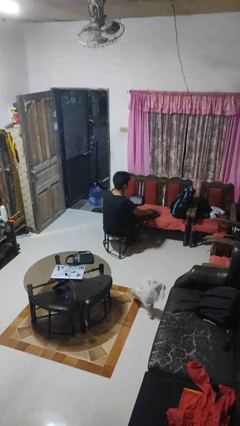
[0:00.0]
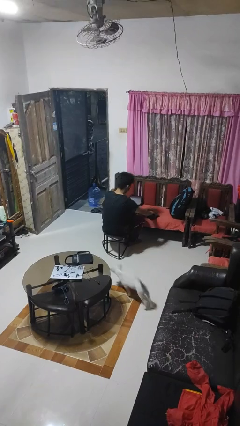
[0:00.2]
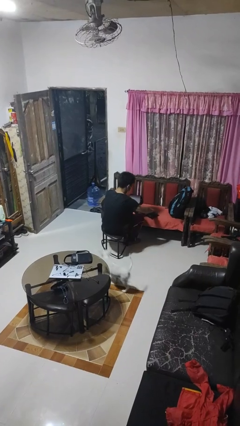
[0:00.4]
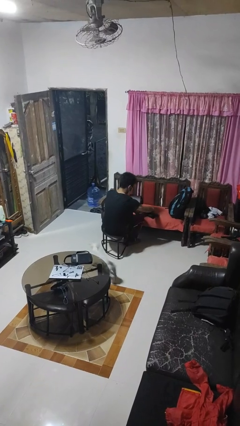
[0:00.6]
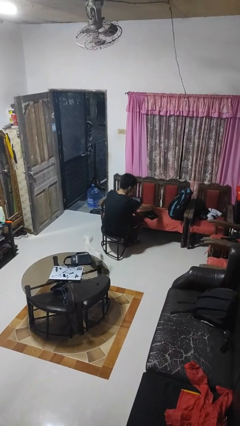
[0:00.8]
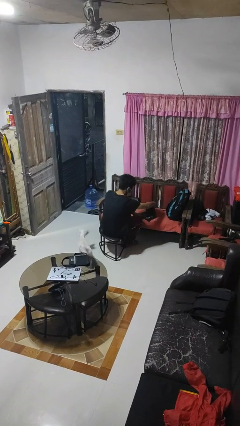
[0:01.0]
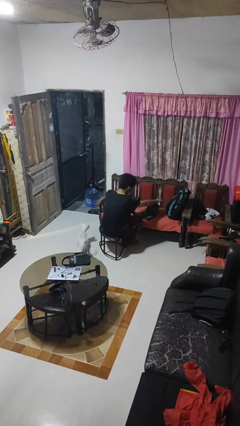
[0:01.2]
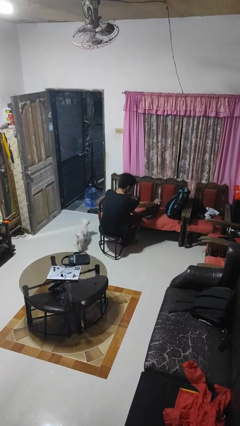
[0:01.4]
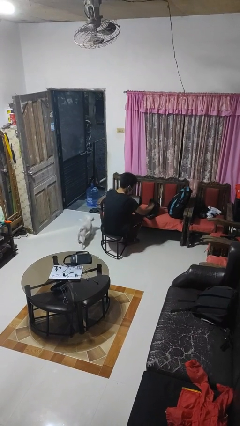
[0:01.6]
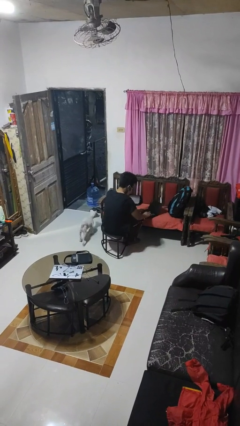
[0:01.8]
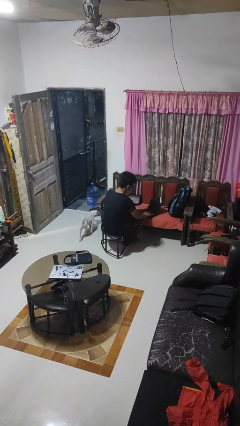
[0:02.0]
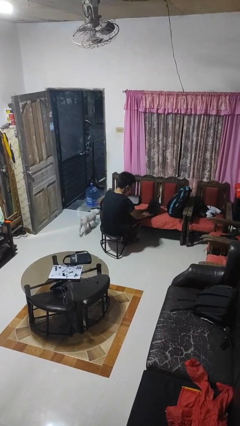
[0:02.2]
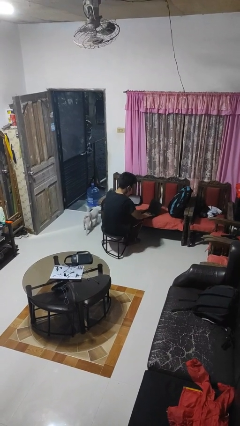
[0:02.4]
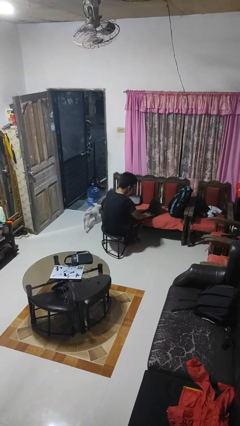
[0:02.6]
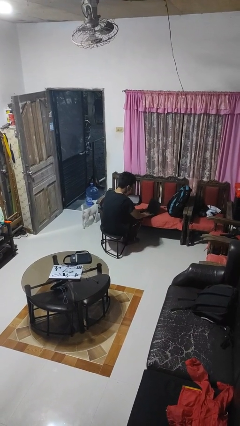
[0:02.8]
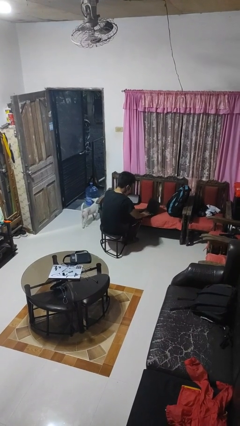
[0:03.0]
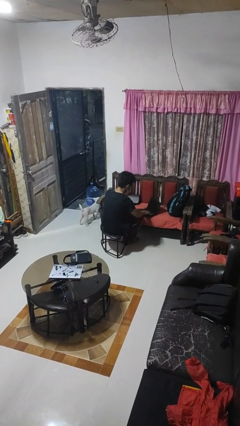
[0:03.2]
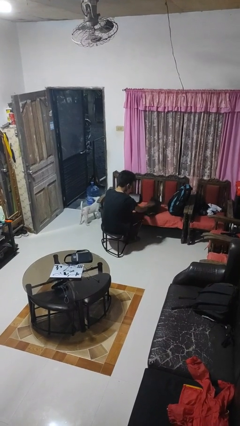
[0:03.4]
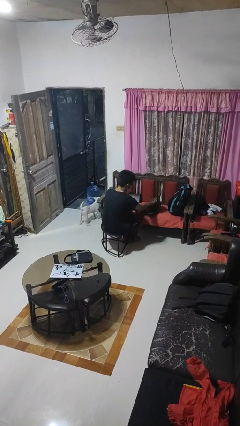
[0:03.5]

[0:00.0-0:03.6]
person opens laptop

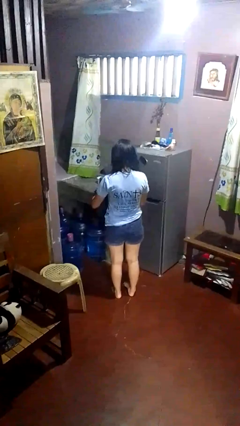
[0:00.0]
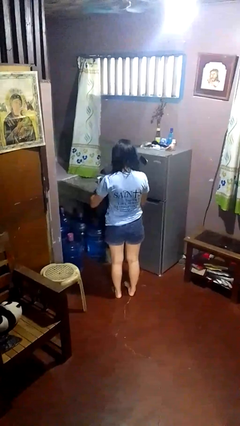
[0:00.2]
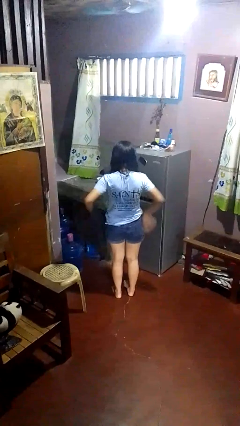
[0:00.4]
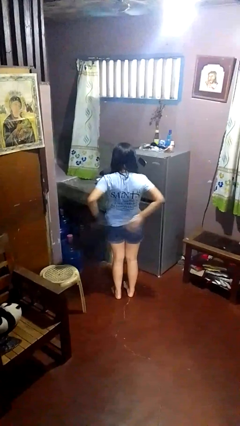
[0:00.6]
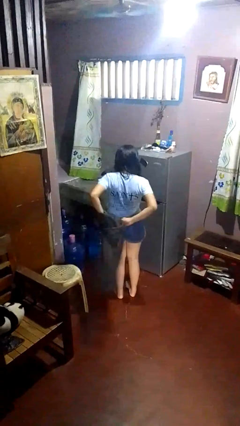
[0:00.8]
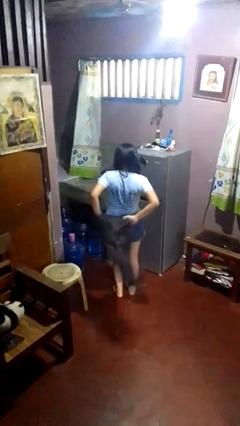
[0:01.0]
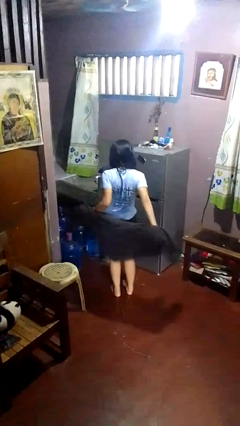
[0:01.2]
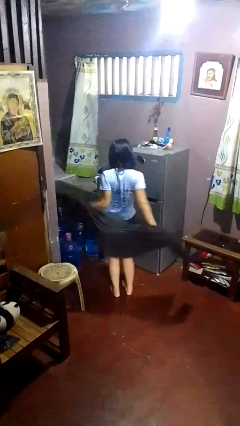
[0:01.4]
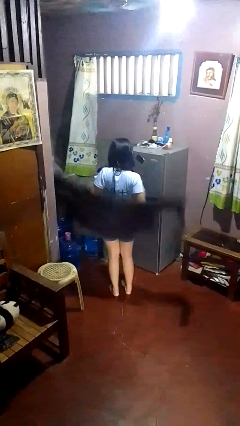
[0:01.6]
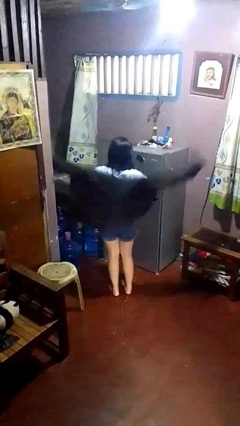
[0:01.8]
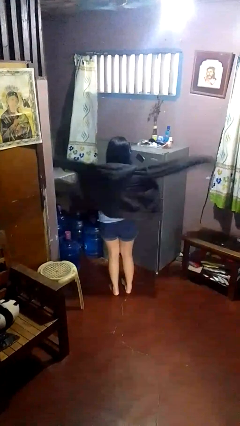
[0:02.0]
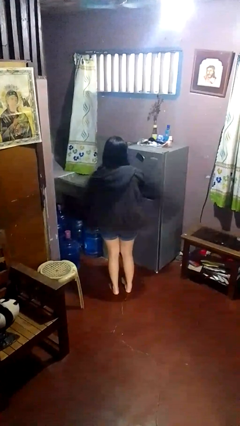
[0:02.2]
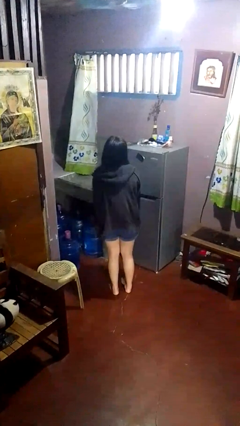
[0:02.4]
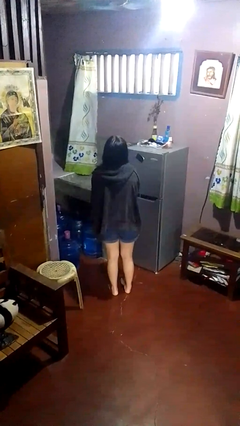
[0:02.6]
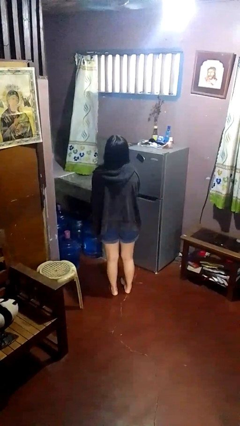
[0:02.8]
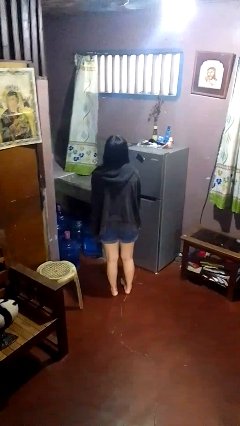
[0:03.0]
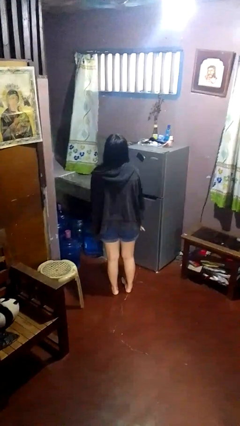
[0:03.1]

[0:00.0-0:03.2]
person puts on jacket

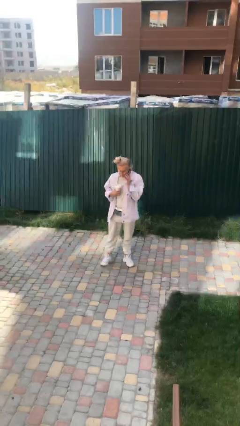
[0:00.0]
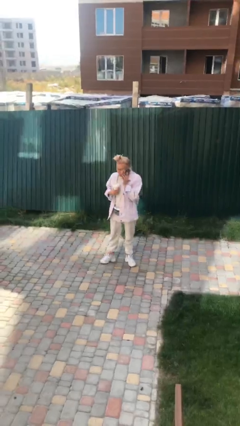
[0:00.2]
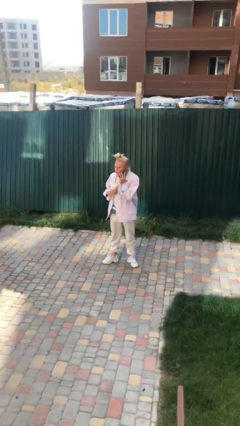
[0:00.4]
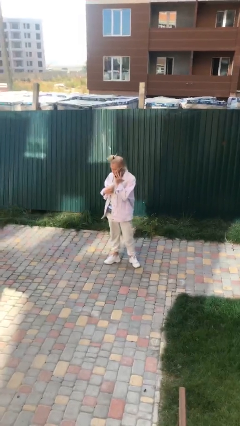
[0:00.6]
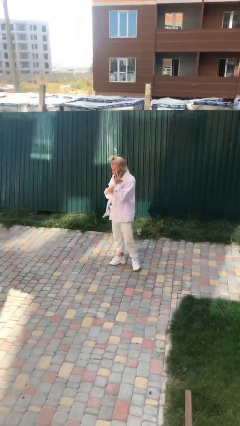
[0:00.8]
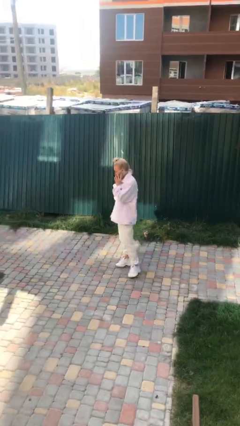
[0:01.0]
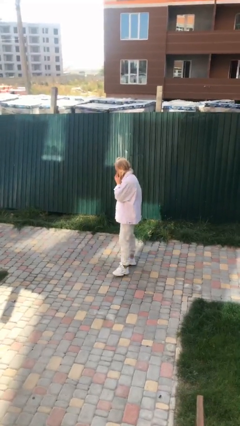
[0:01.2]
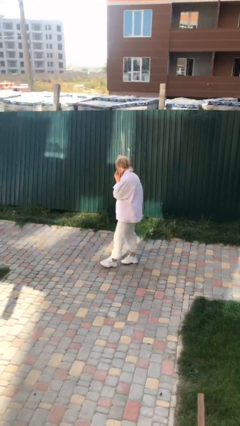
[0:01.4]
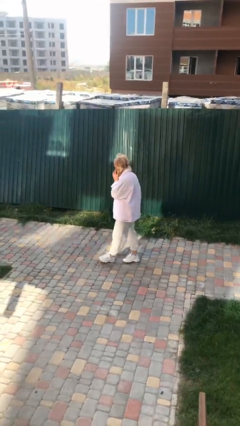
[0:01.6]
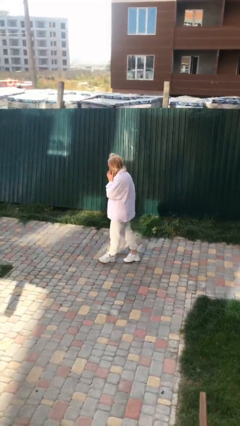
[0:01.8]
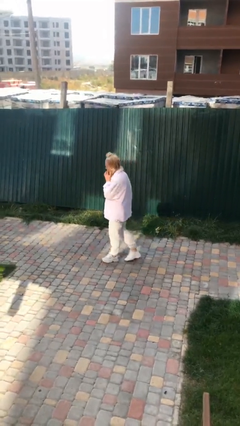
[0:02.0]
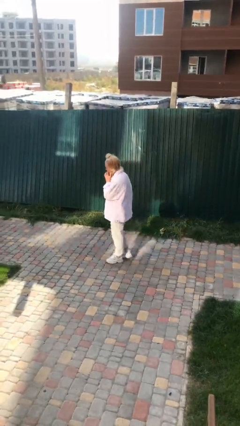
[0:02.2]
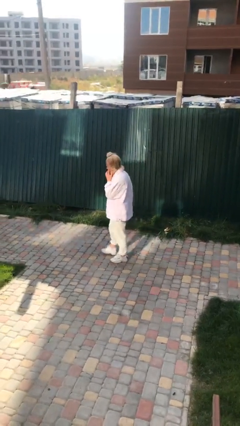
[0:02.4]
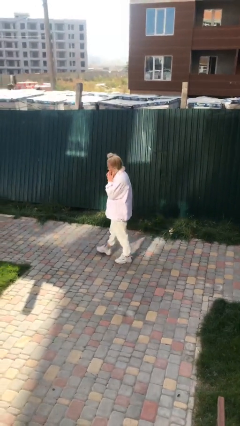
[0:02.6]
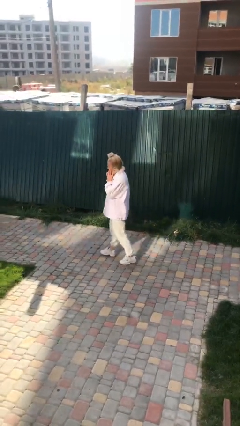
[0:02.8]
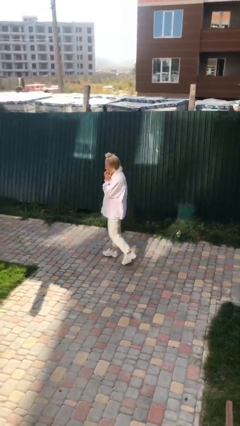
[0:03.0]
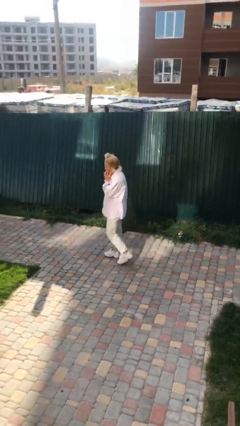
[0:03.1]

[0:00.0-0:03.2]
person talks on phone

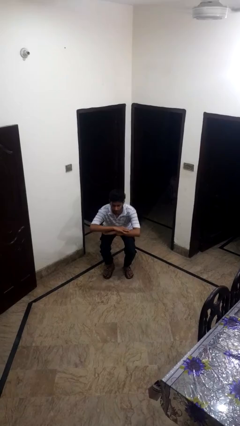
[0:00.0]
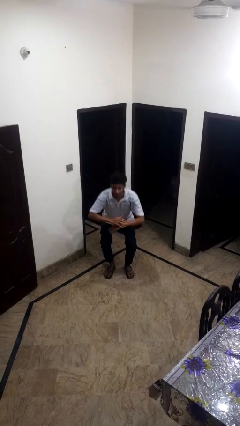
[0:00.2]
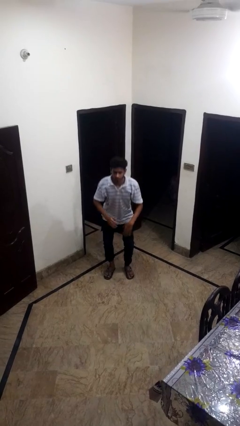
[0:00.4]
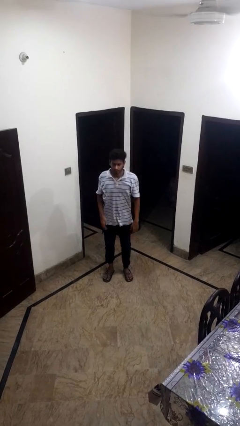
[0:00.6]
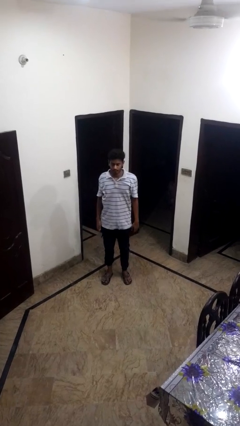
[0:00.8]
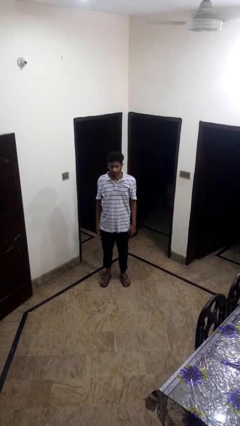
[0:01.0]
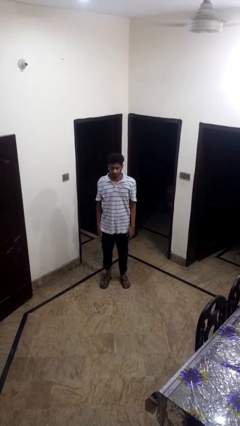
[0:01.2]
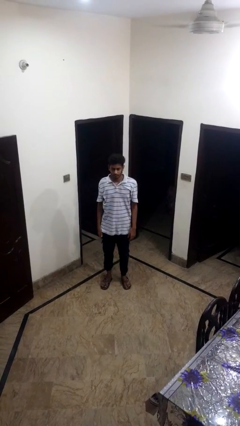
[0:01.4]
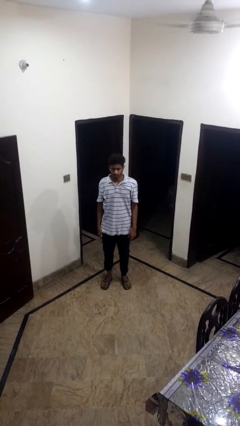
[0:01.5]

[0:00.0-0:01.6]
person stands up

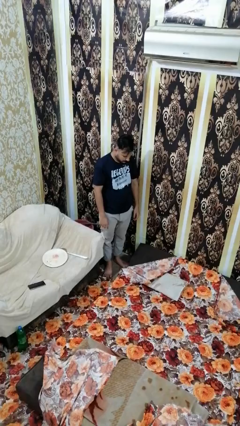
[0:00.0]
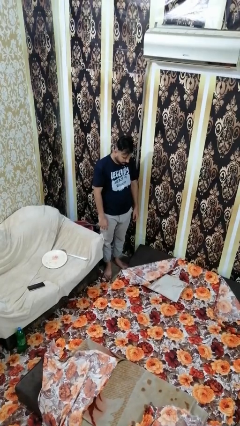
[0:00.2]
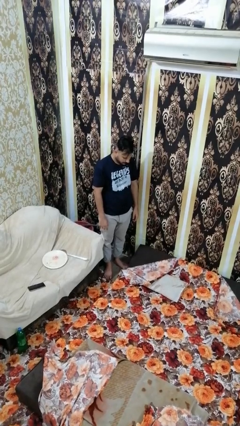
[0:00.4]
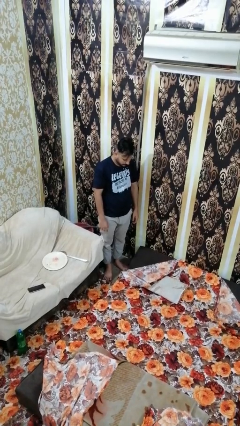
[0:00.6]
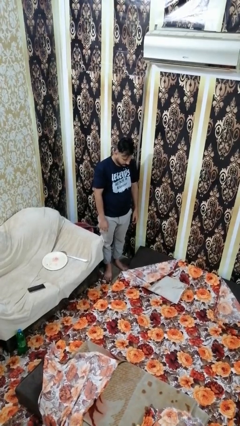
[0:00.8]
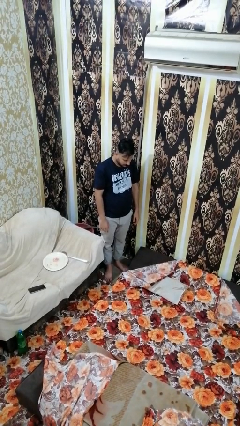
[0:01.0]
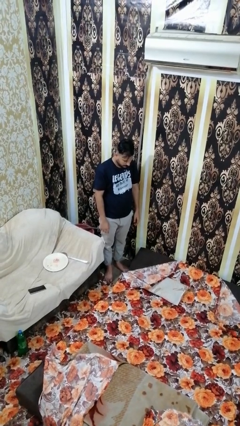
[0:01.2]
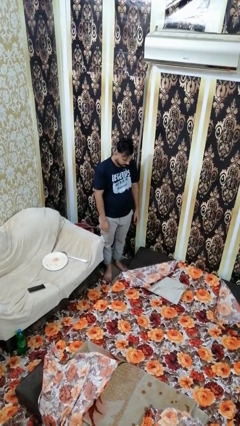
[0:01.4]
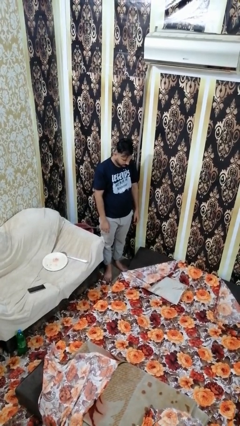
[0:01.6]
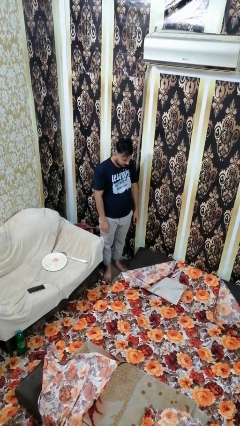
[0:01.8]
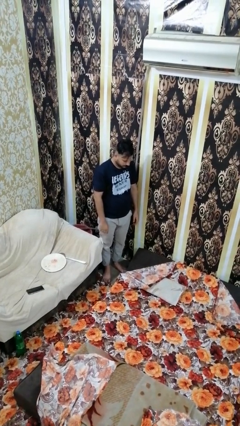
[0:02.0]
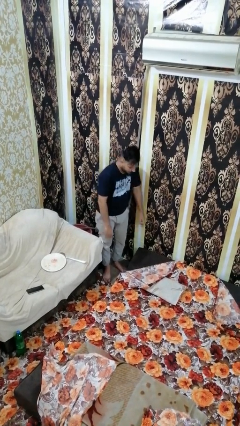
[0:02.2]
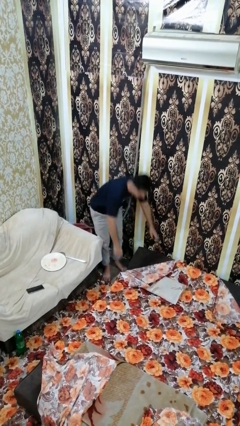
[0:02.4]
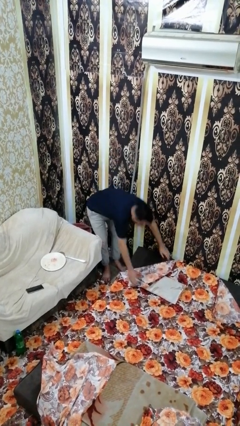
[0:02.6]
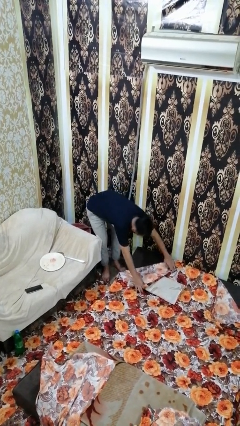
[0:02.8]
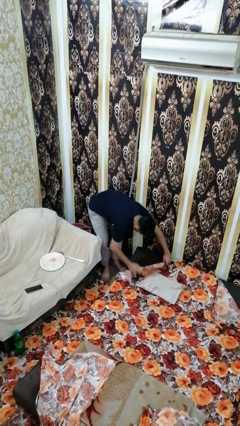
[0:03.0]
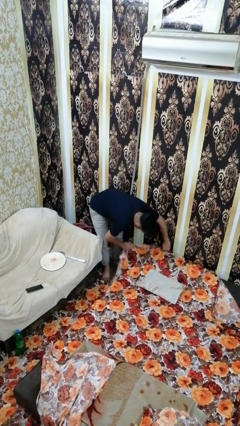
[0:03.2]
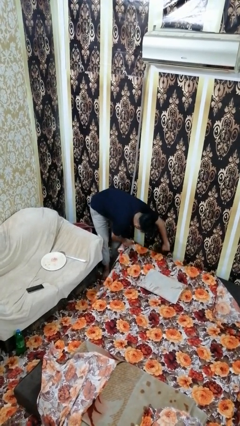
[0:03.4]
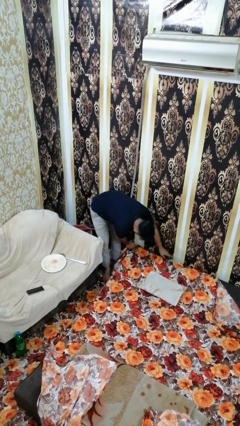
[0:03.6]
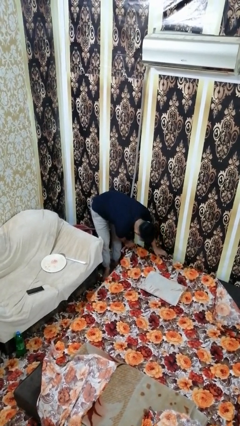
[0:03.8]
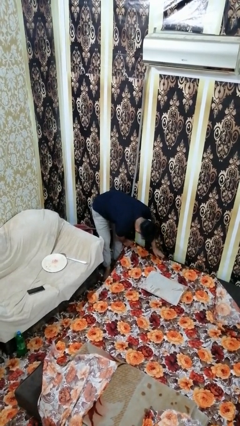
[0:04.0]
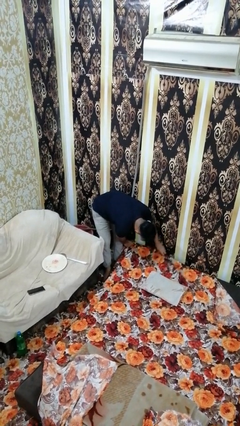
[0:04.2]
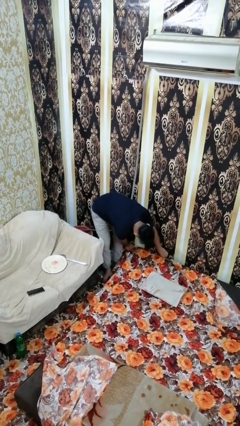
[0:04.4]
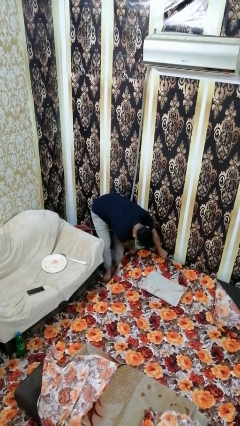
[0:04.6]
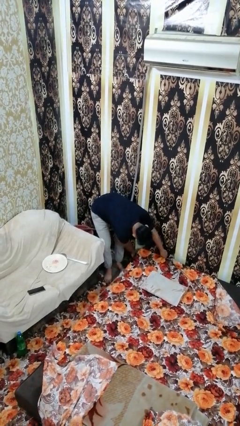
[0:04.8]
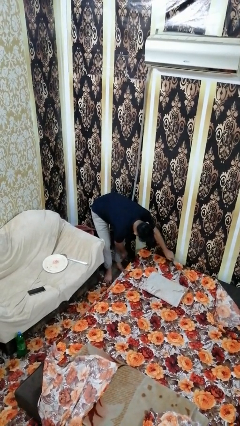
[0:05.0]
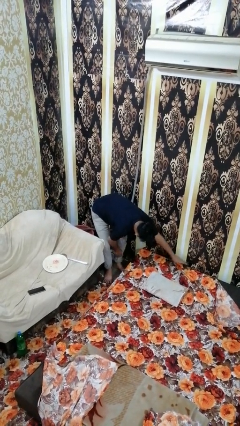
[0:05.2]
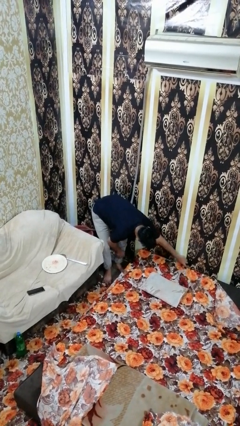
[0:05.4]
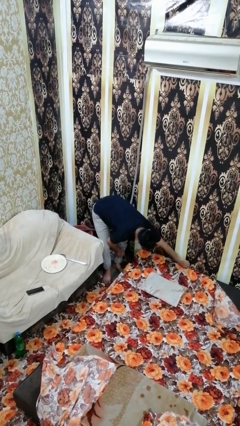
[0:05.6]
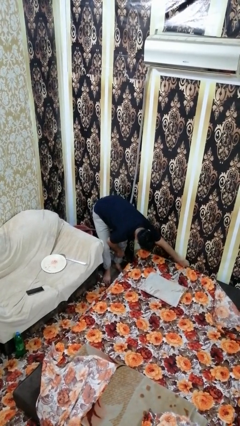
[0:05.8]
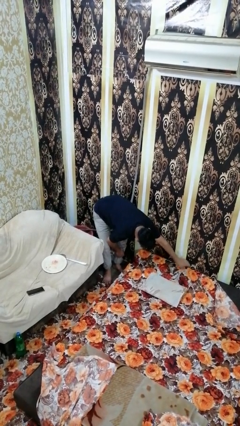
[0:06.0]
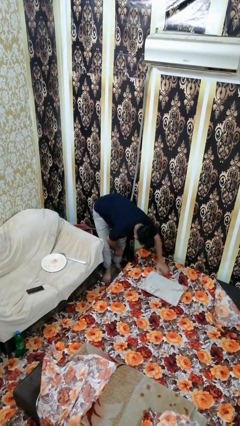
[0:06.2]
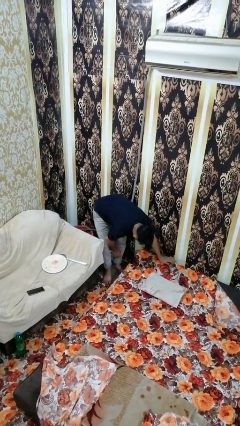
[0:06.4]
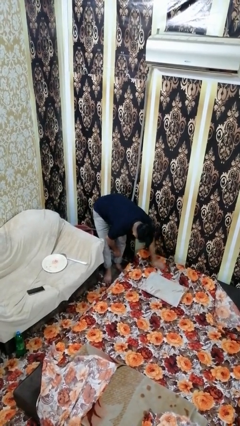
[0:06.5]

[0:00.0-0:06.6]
person makes bed
